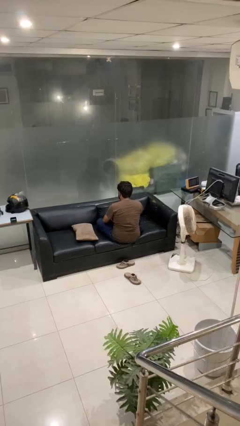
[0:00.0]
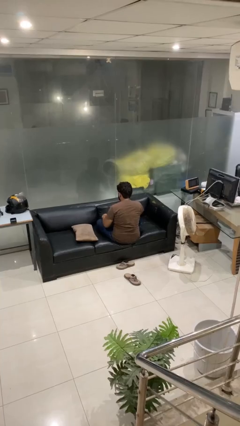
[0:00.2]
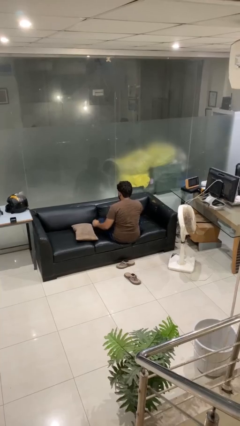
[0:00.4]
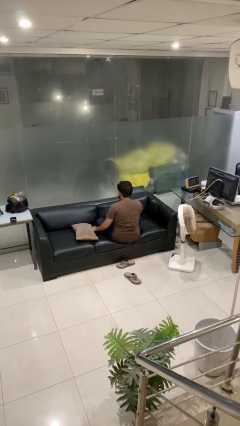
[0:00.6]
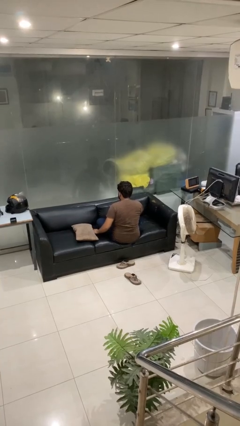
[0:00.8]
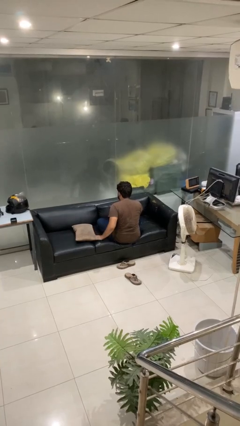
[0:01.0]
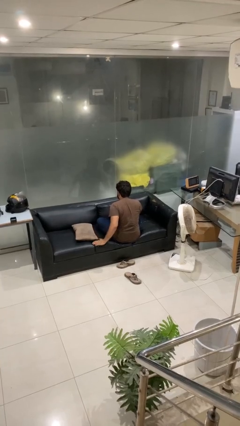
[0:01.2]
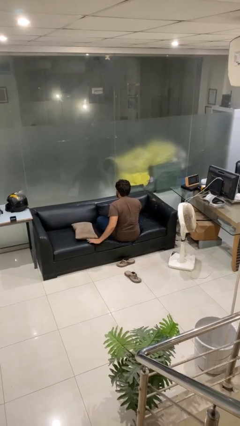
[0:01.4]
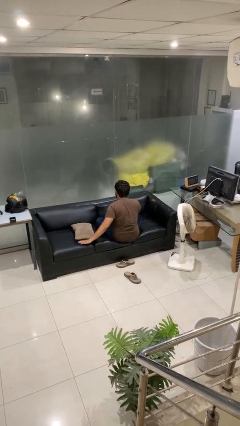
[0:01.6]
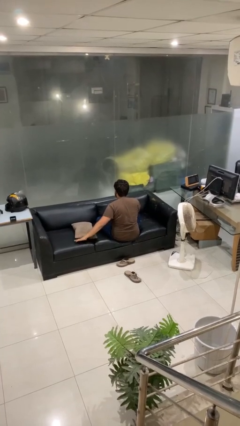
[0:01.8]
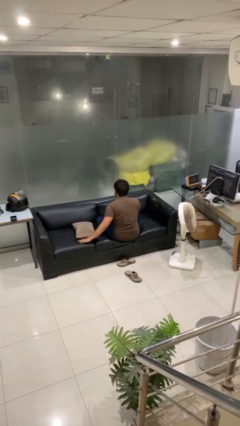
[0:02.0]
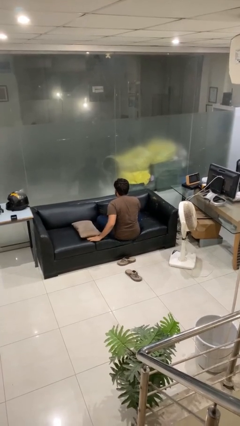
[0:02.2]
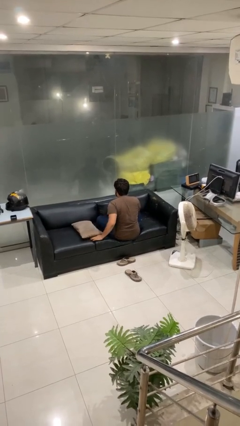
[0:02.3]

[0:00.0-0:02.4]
person searches in couch

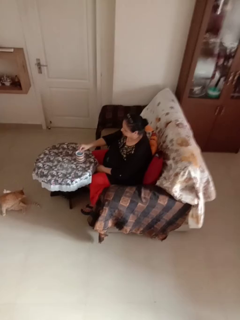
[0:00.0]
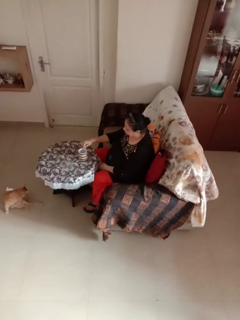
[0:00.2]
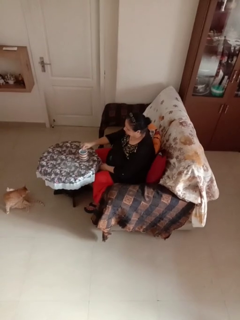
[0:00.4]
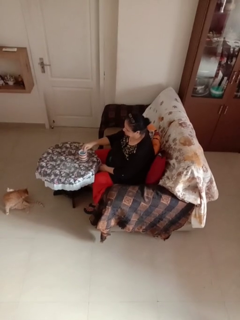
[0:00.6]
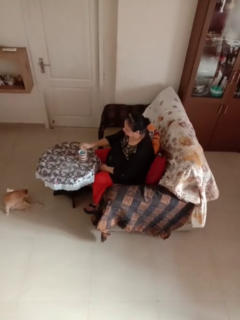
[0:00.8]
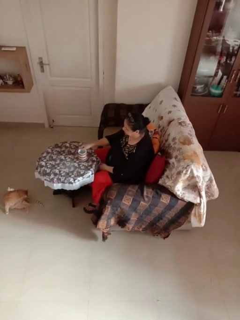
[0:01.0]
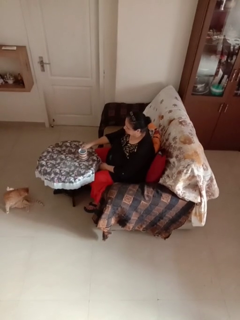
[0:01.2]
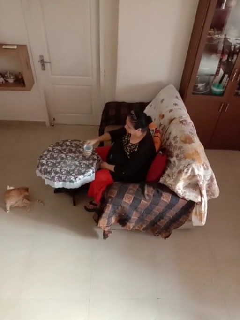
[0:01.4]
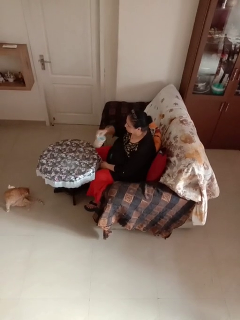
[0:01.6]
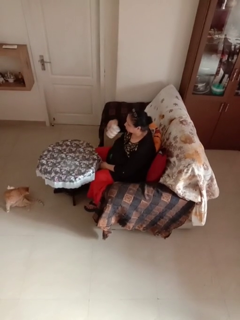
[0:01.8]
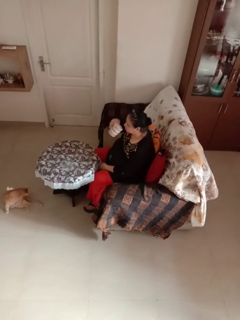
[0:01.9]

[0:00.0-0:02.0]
person stirs mug

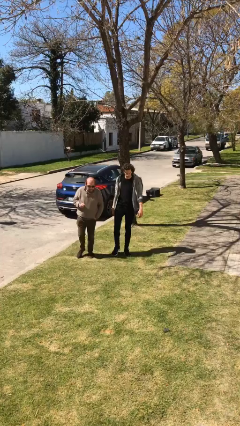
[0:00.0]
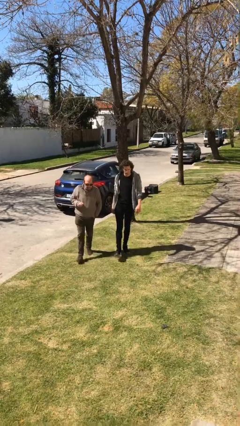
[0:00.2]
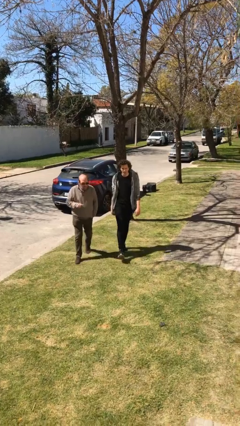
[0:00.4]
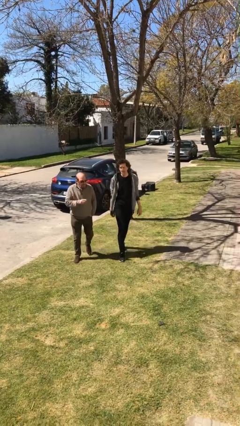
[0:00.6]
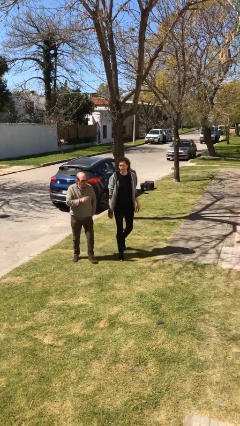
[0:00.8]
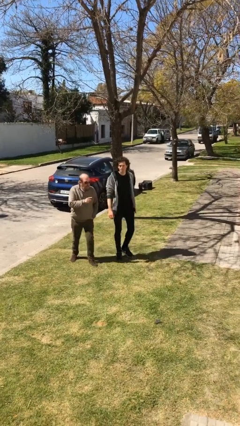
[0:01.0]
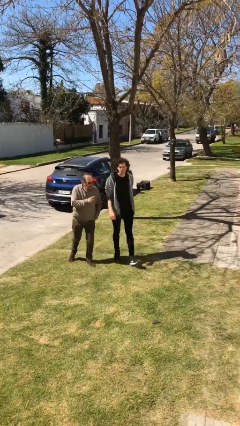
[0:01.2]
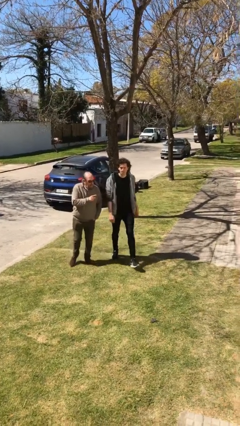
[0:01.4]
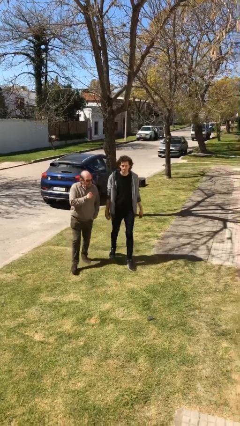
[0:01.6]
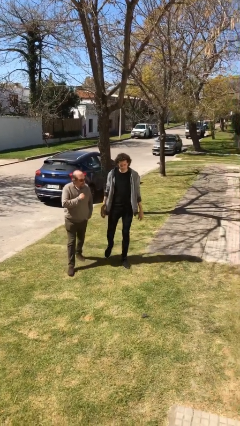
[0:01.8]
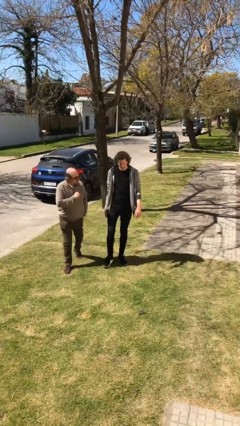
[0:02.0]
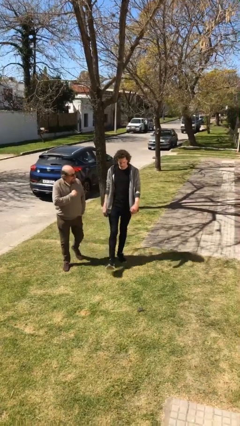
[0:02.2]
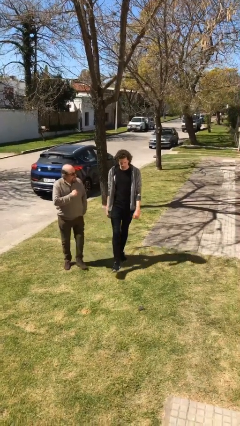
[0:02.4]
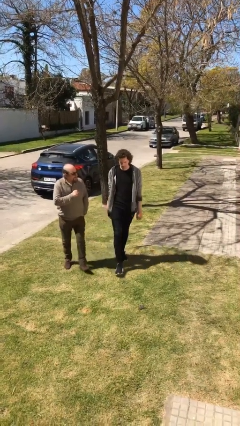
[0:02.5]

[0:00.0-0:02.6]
person talks to person

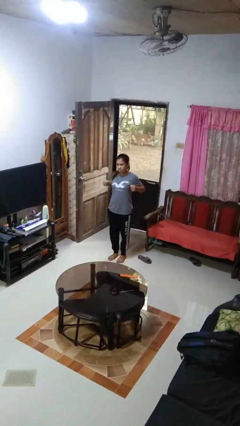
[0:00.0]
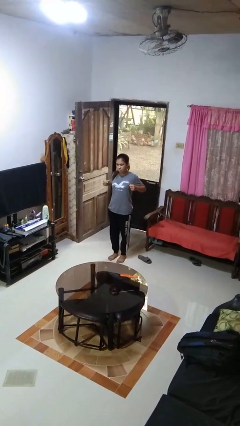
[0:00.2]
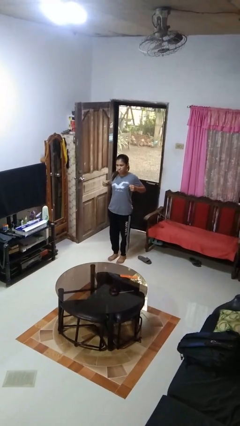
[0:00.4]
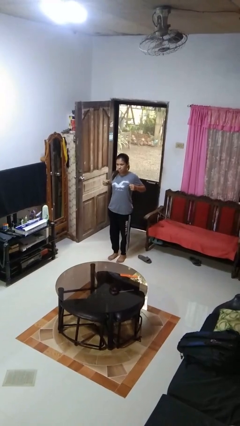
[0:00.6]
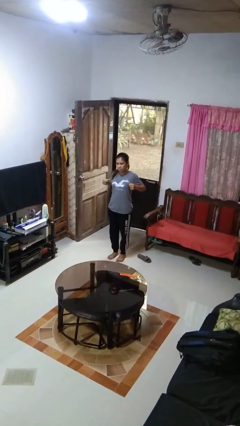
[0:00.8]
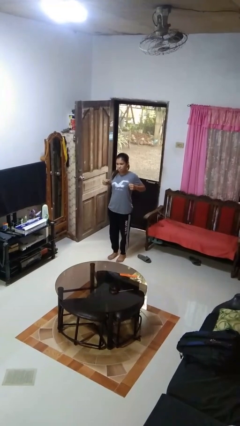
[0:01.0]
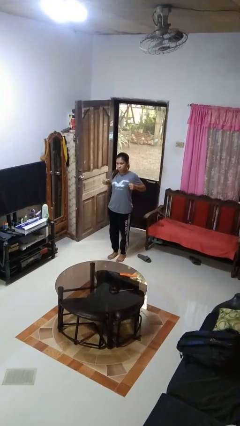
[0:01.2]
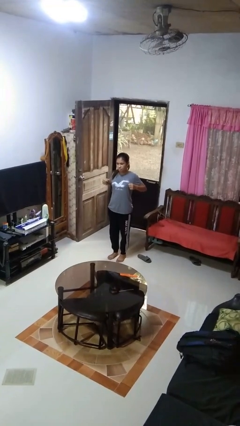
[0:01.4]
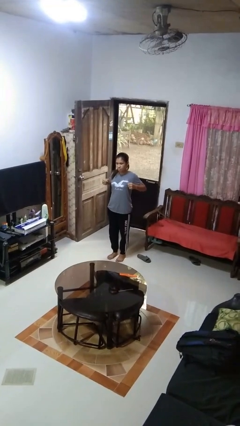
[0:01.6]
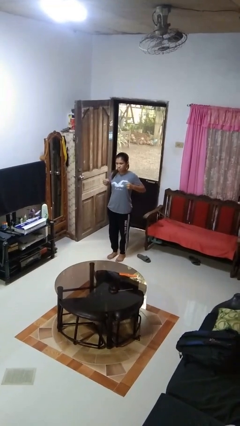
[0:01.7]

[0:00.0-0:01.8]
person gestures zoom in

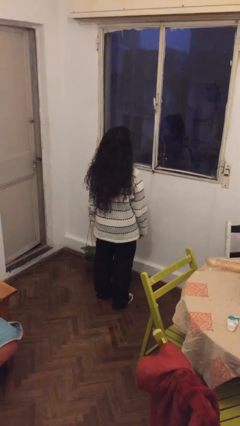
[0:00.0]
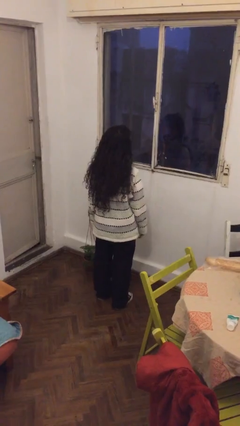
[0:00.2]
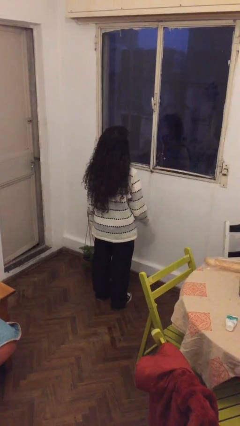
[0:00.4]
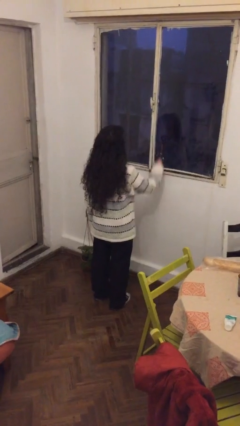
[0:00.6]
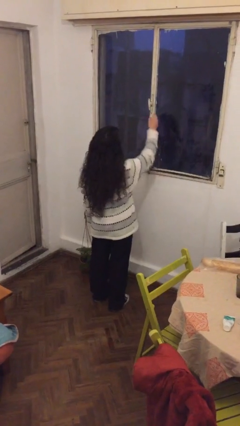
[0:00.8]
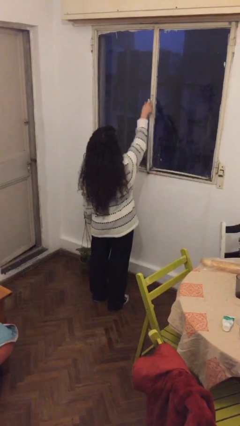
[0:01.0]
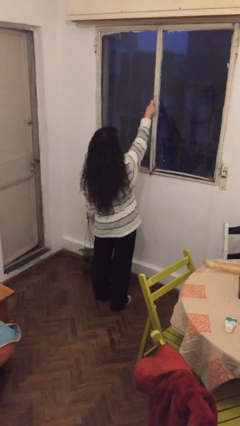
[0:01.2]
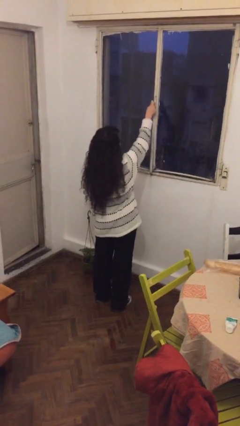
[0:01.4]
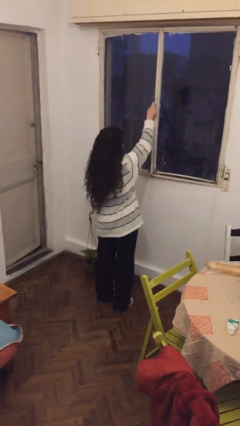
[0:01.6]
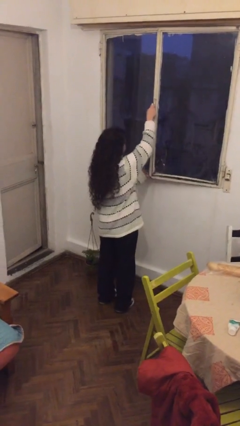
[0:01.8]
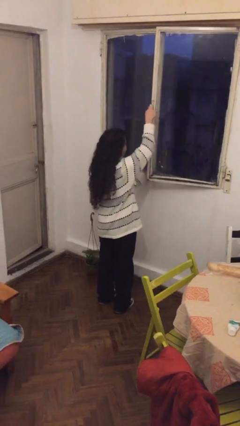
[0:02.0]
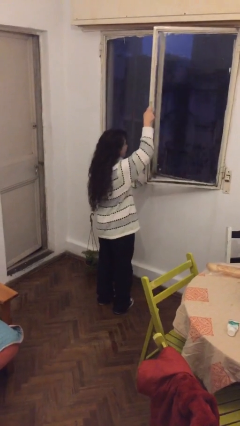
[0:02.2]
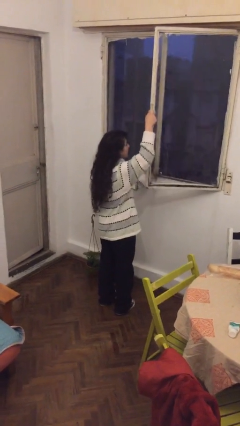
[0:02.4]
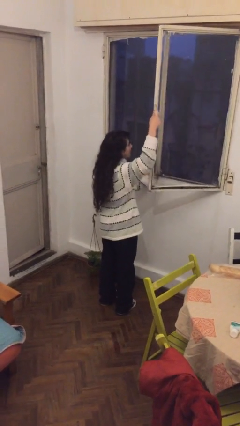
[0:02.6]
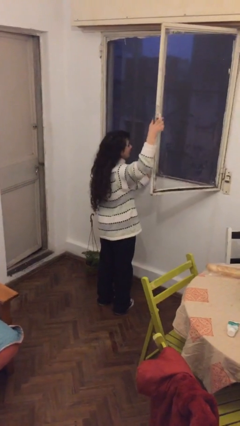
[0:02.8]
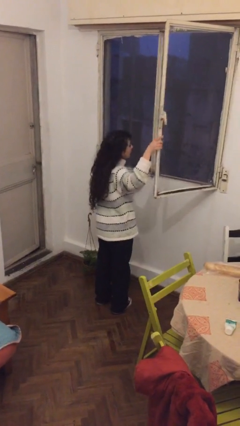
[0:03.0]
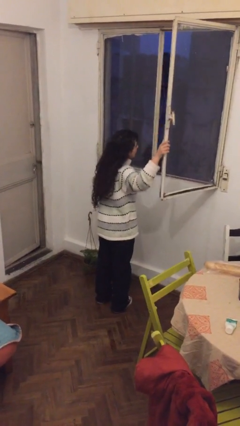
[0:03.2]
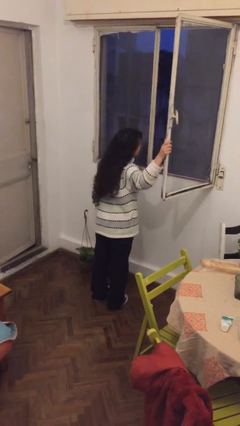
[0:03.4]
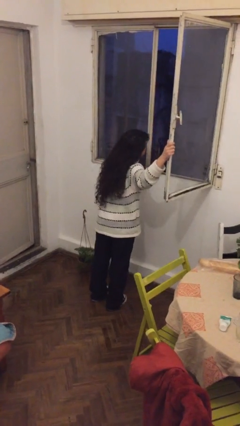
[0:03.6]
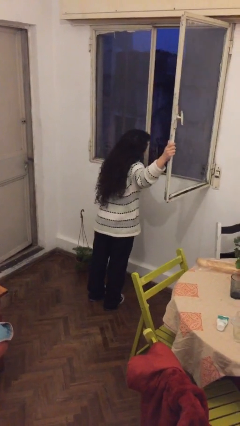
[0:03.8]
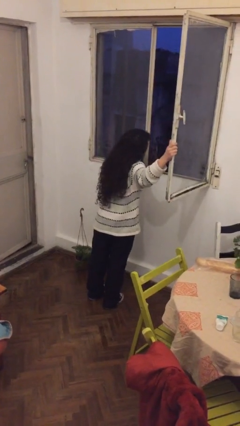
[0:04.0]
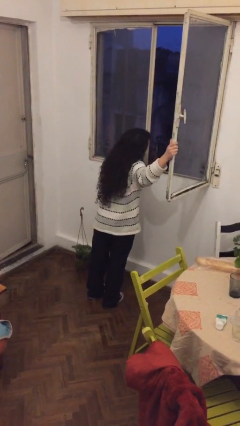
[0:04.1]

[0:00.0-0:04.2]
person opens home window

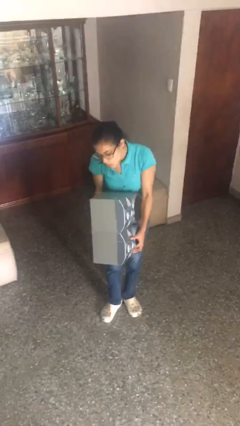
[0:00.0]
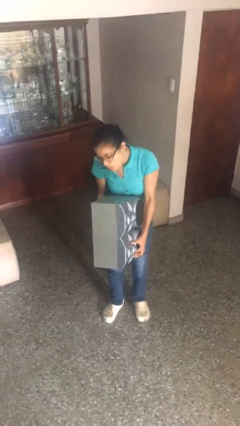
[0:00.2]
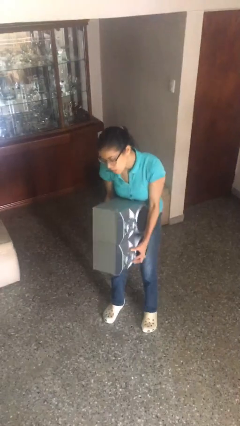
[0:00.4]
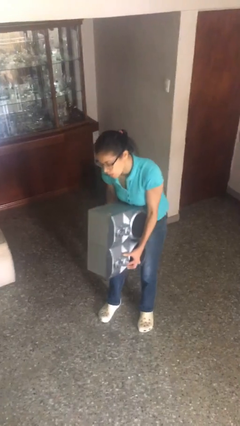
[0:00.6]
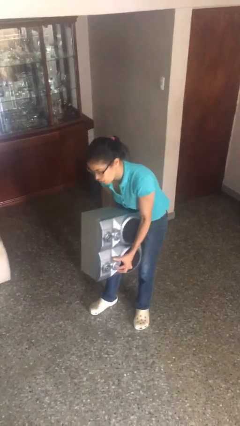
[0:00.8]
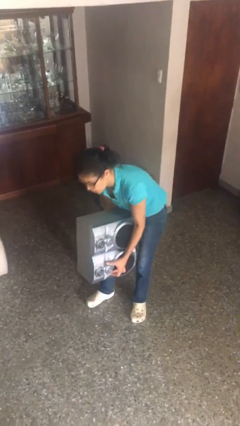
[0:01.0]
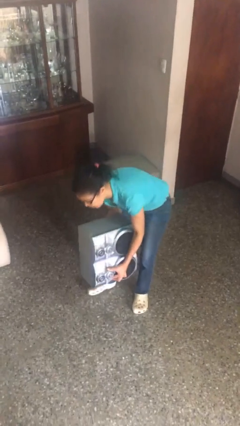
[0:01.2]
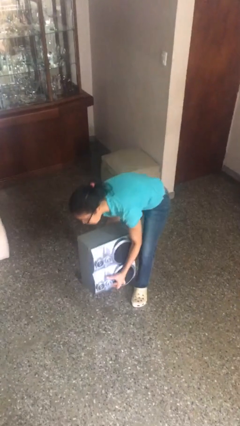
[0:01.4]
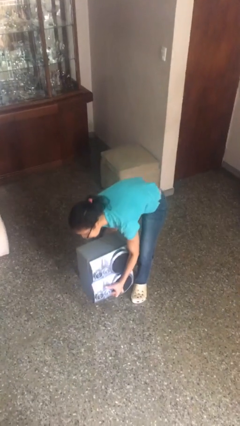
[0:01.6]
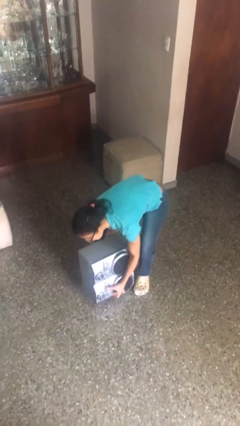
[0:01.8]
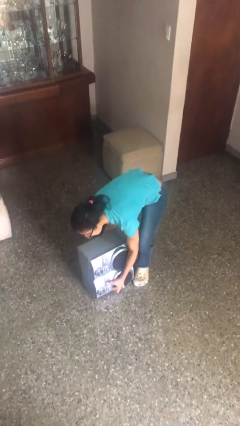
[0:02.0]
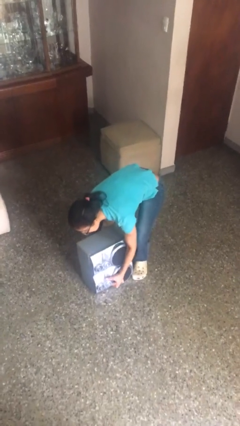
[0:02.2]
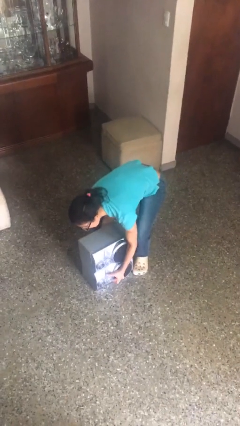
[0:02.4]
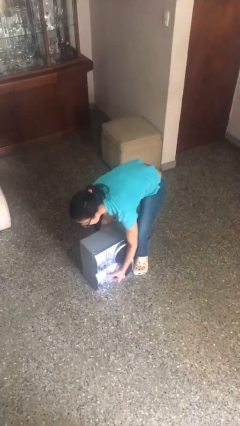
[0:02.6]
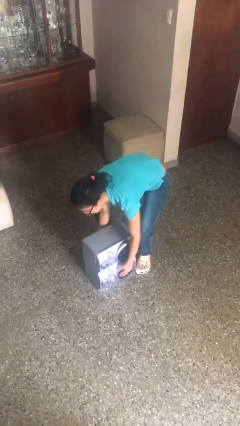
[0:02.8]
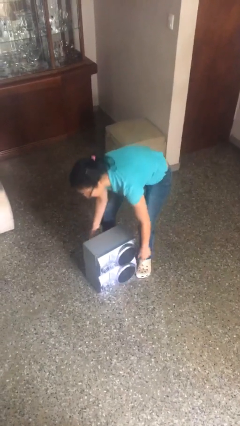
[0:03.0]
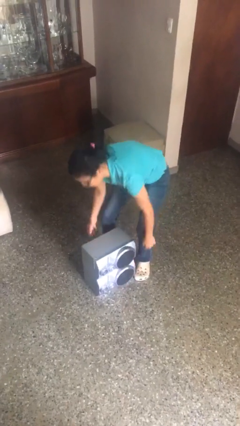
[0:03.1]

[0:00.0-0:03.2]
person puts down object on floor

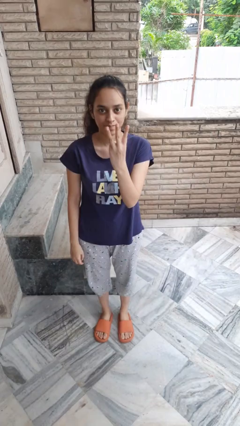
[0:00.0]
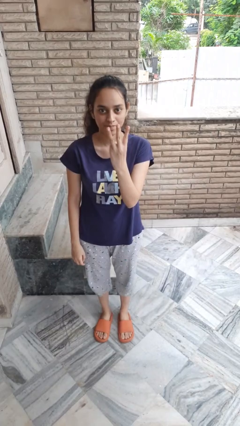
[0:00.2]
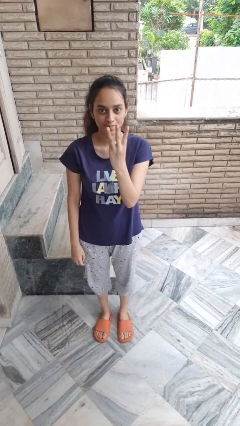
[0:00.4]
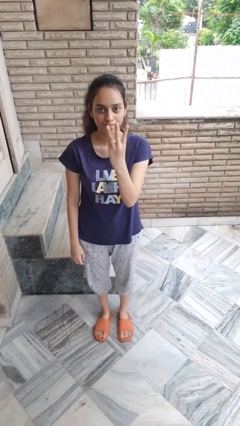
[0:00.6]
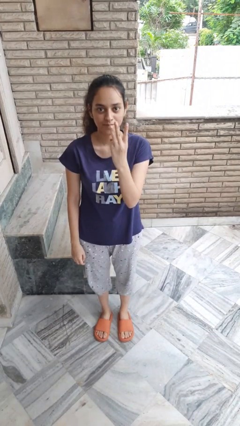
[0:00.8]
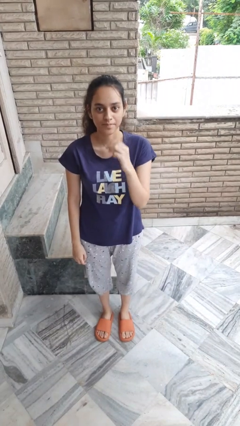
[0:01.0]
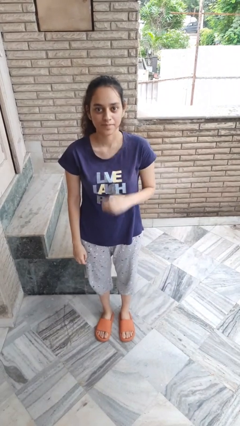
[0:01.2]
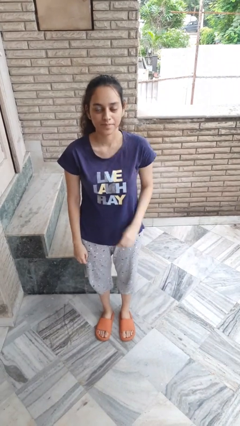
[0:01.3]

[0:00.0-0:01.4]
person gestures number three
